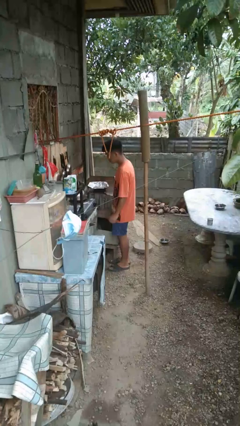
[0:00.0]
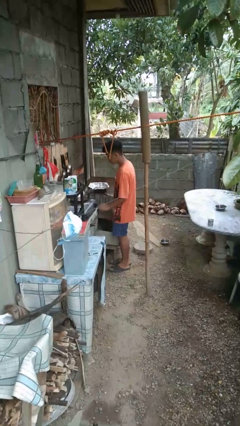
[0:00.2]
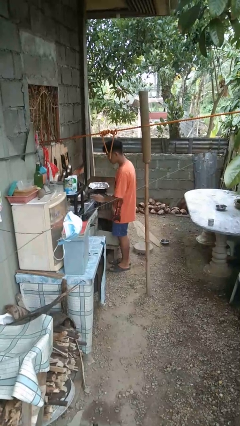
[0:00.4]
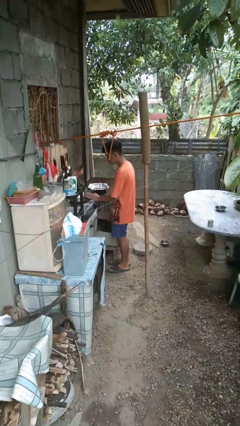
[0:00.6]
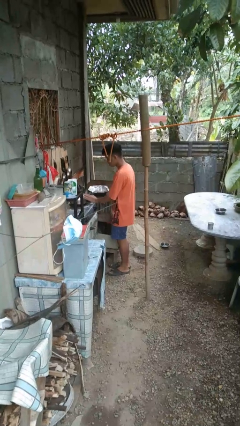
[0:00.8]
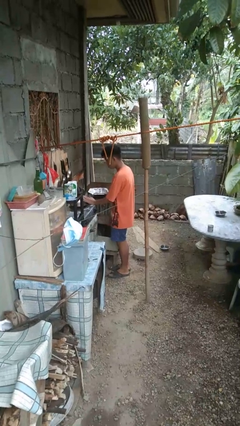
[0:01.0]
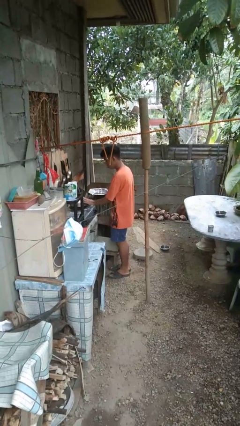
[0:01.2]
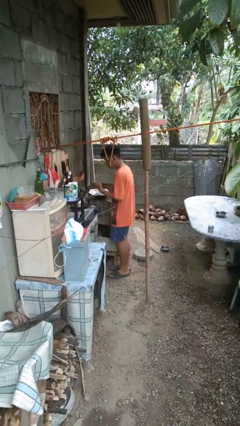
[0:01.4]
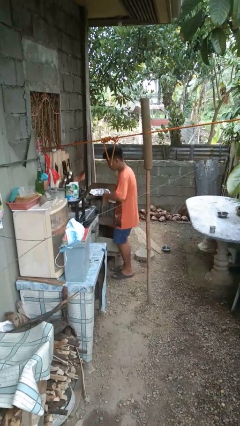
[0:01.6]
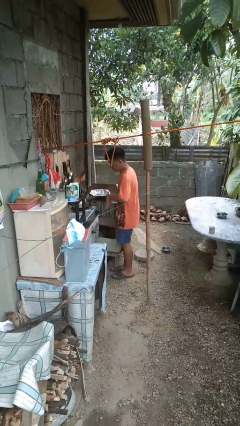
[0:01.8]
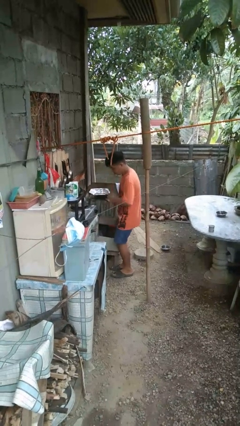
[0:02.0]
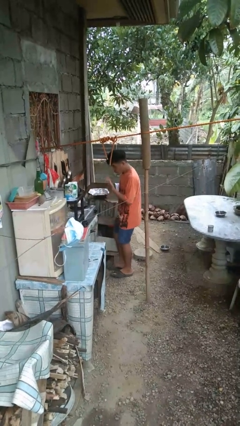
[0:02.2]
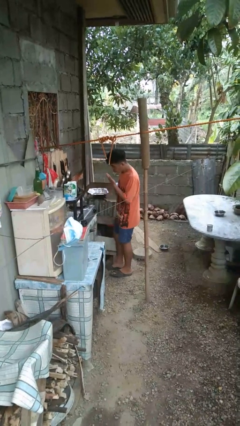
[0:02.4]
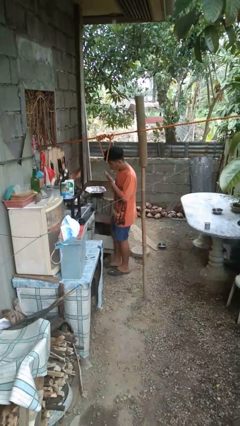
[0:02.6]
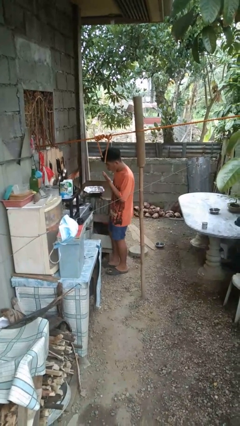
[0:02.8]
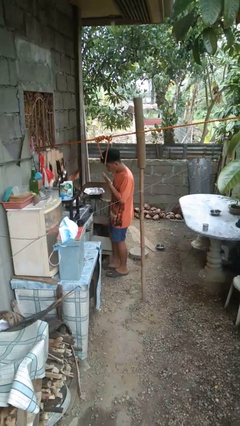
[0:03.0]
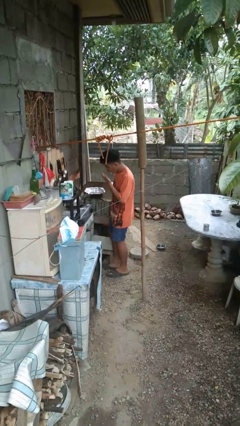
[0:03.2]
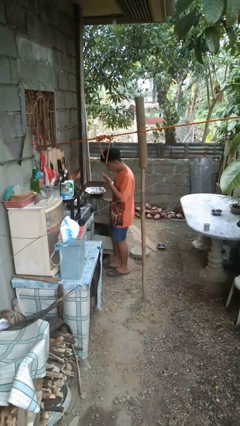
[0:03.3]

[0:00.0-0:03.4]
person burns hand

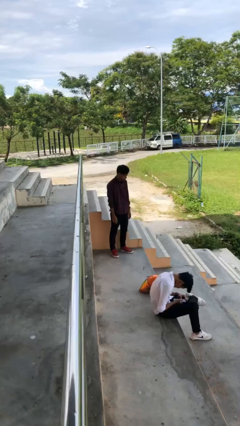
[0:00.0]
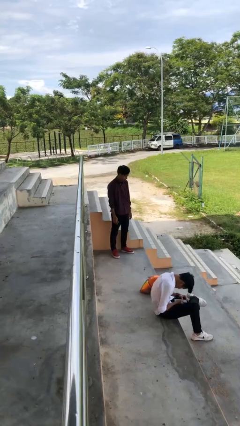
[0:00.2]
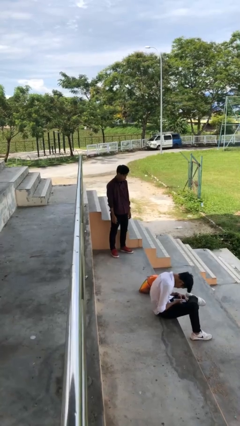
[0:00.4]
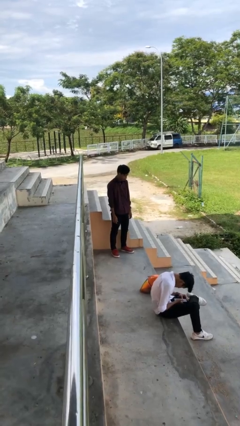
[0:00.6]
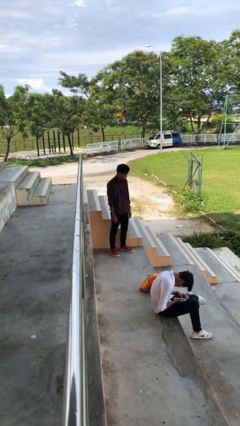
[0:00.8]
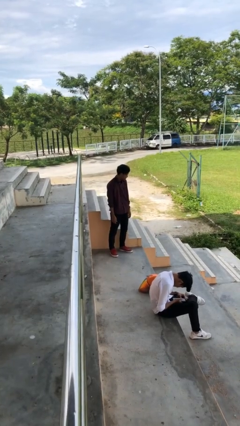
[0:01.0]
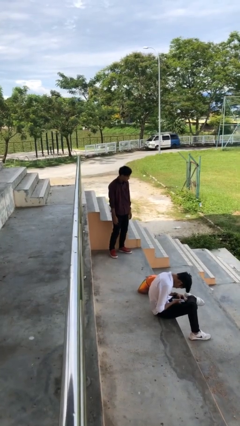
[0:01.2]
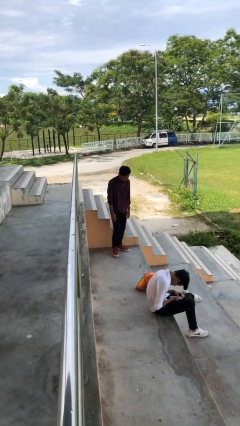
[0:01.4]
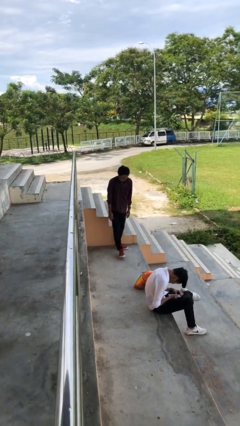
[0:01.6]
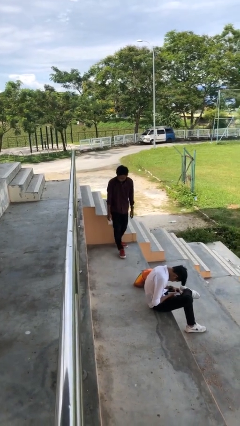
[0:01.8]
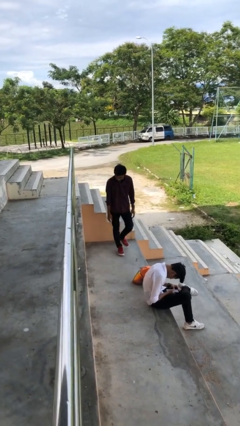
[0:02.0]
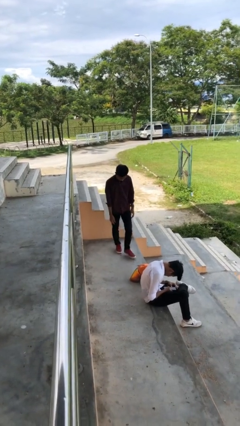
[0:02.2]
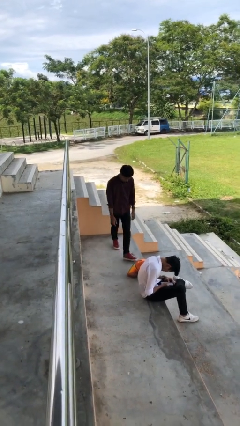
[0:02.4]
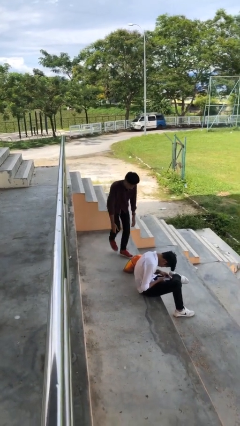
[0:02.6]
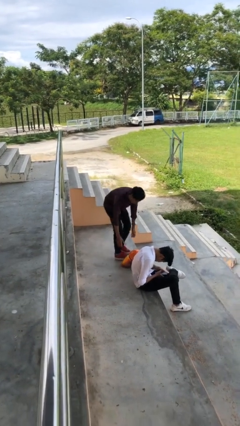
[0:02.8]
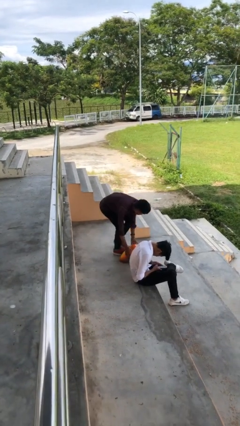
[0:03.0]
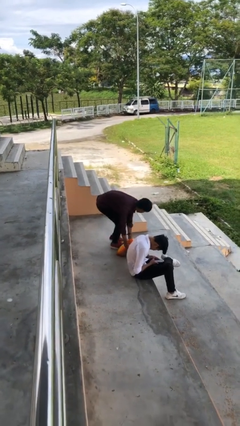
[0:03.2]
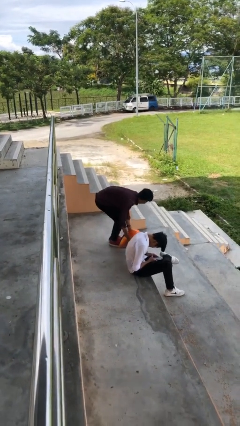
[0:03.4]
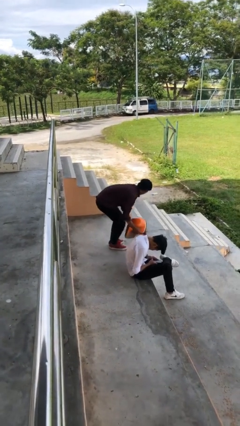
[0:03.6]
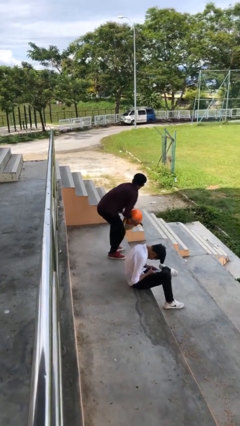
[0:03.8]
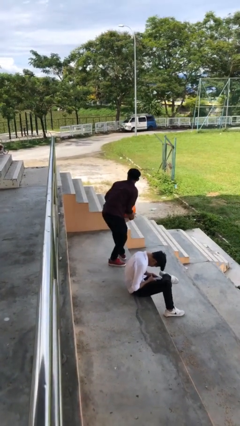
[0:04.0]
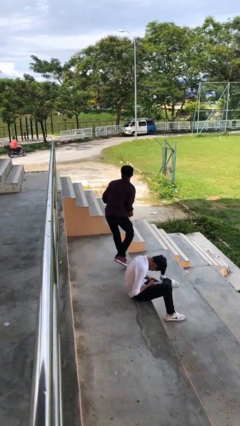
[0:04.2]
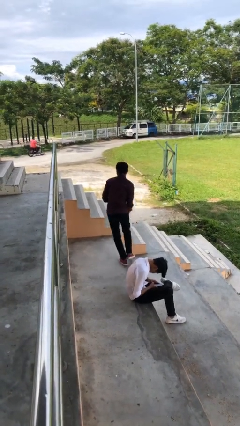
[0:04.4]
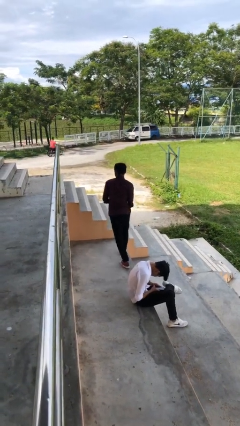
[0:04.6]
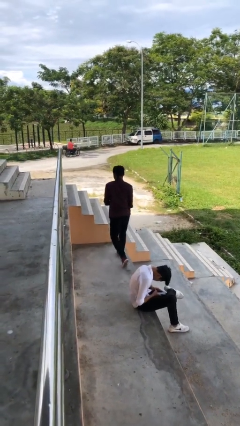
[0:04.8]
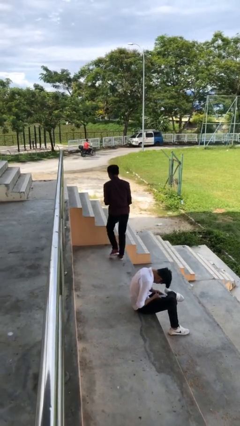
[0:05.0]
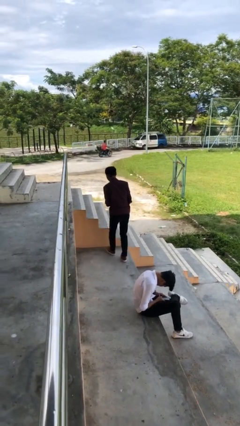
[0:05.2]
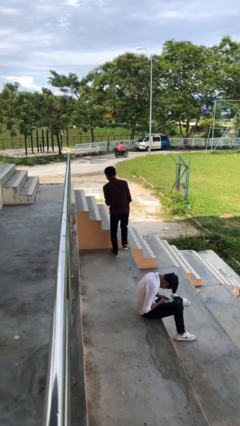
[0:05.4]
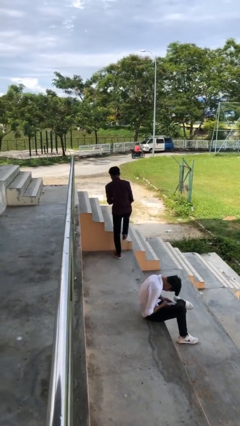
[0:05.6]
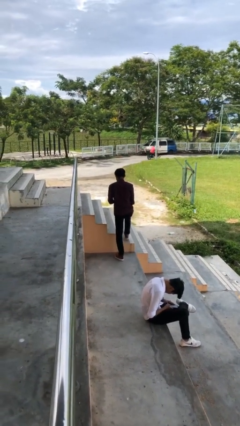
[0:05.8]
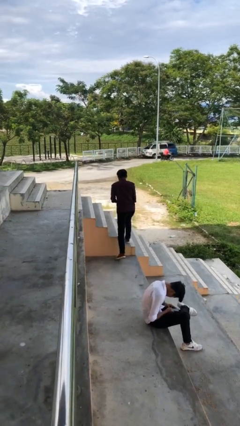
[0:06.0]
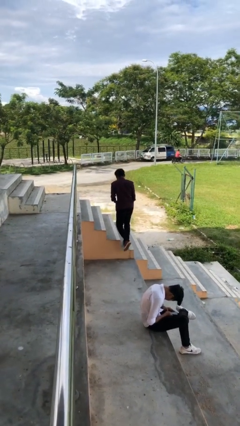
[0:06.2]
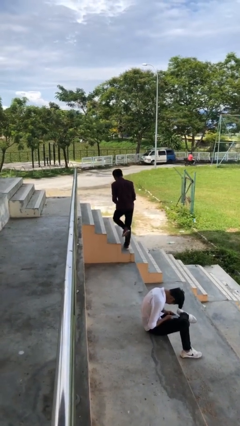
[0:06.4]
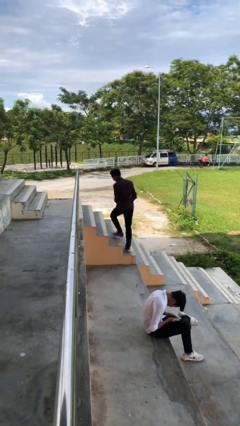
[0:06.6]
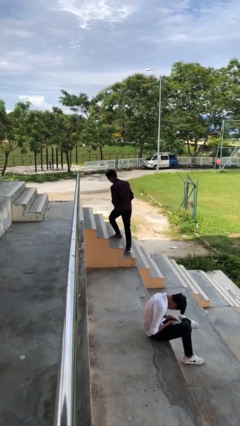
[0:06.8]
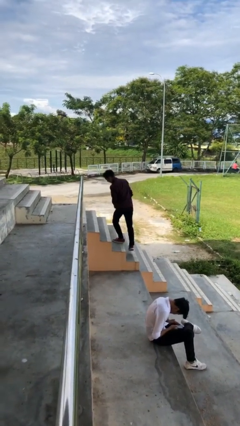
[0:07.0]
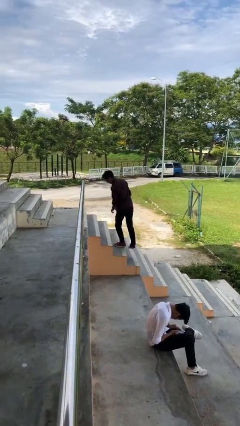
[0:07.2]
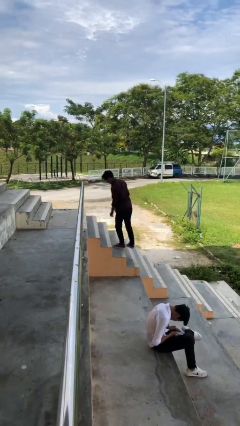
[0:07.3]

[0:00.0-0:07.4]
person steals object from person

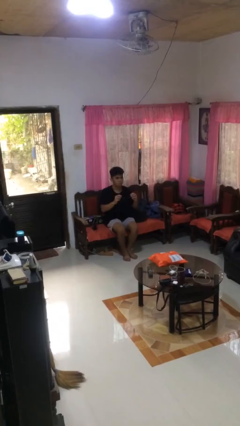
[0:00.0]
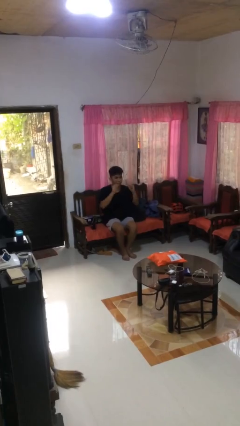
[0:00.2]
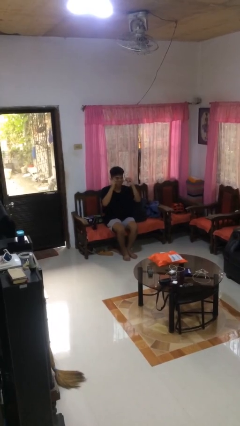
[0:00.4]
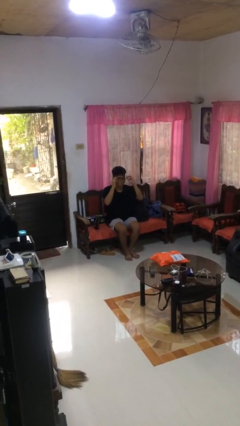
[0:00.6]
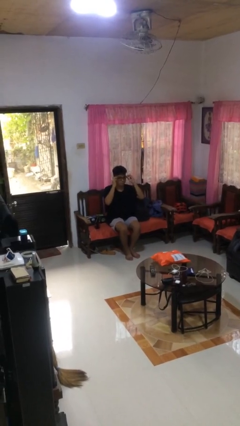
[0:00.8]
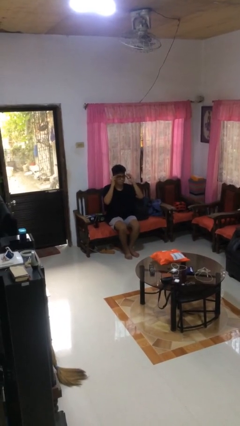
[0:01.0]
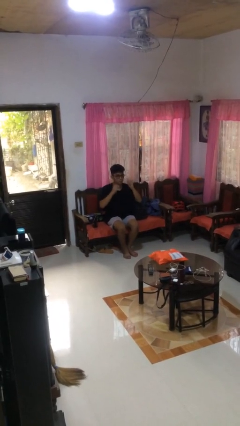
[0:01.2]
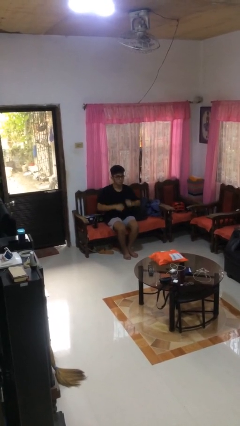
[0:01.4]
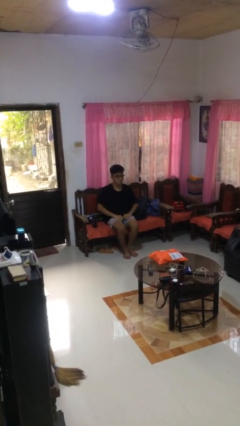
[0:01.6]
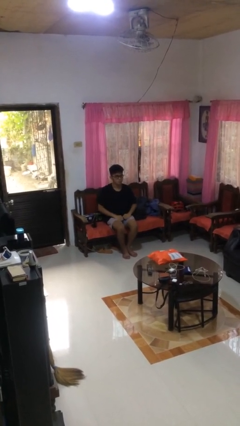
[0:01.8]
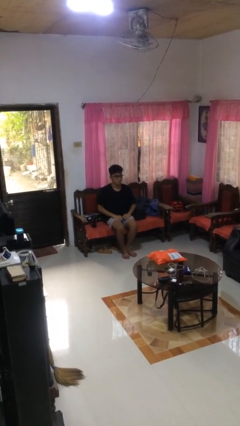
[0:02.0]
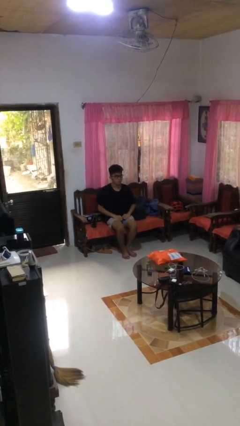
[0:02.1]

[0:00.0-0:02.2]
person puts on glasses

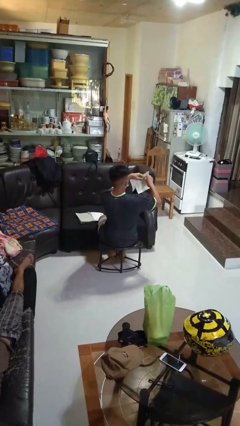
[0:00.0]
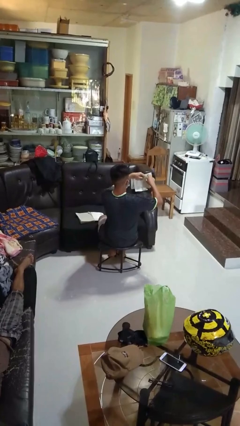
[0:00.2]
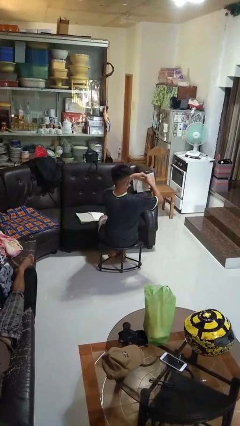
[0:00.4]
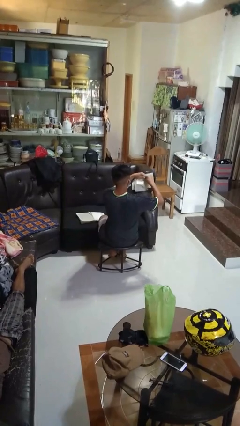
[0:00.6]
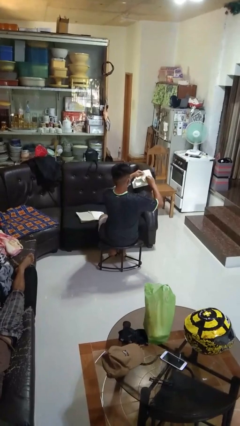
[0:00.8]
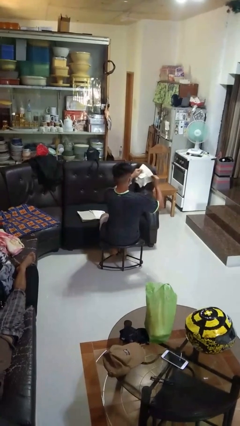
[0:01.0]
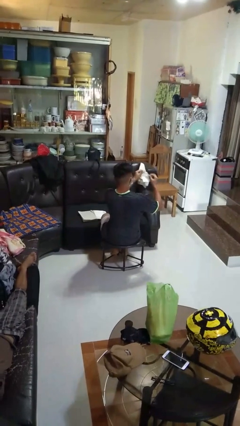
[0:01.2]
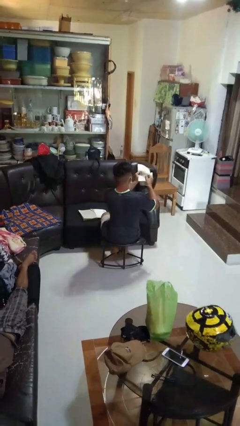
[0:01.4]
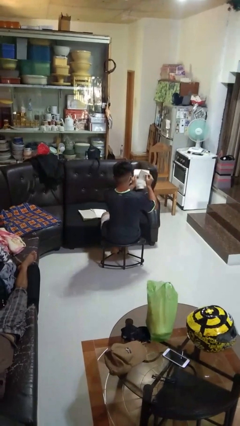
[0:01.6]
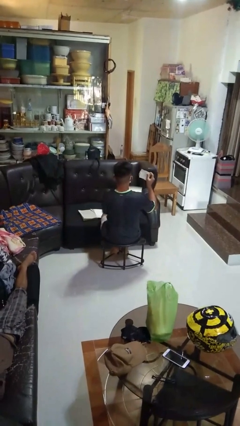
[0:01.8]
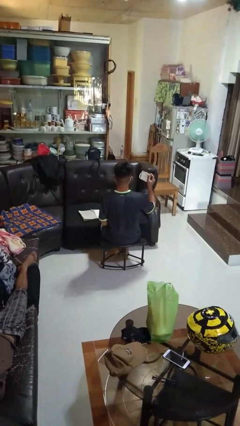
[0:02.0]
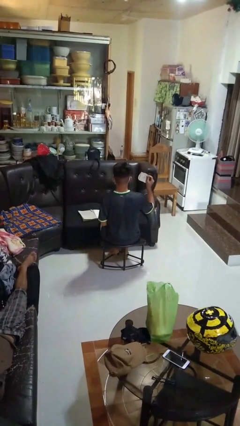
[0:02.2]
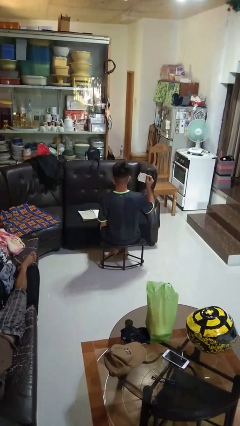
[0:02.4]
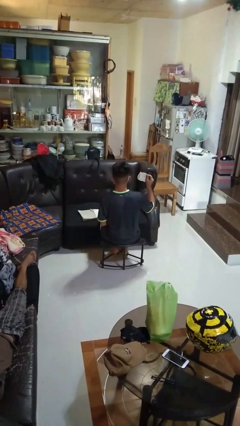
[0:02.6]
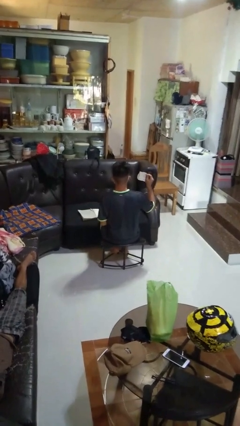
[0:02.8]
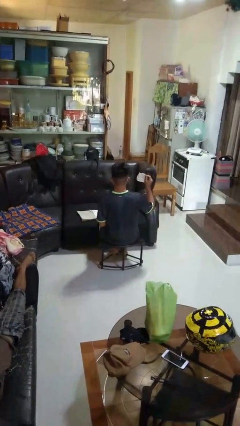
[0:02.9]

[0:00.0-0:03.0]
person tears paper

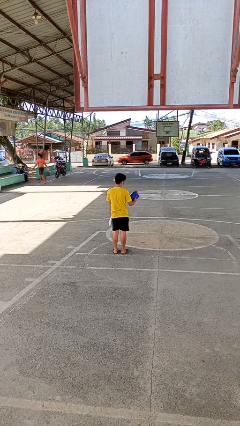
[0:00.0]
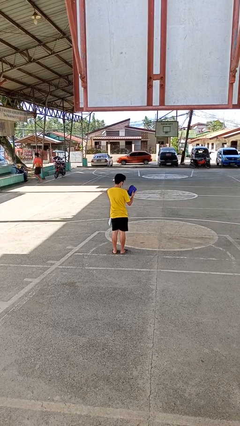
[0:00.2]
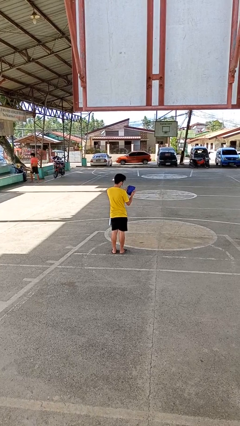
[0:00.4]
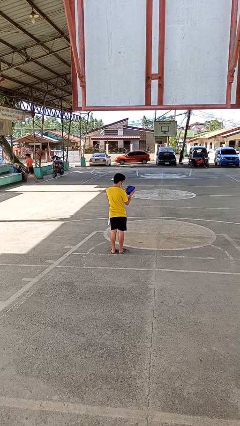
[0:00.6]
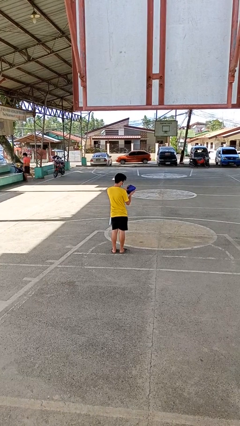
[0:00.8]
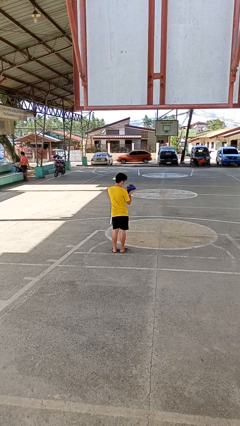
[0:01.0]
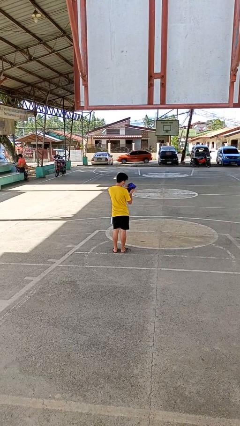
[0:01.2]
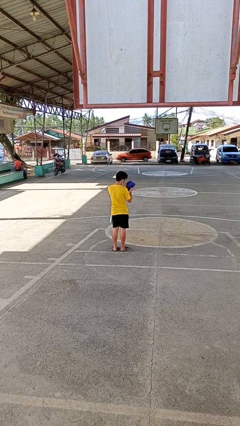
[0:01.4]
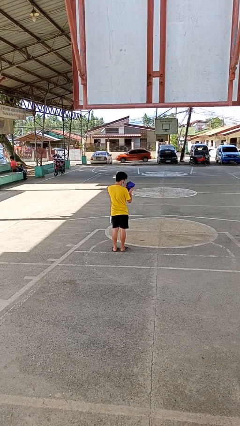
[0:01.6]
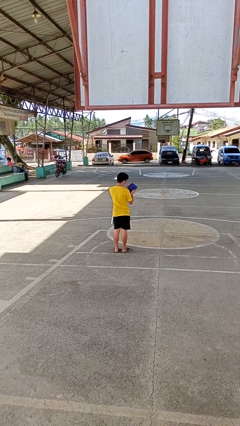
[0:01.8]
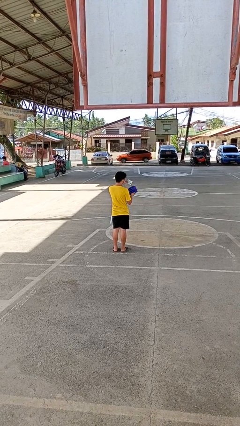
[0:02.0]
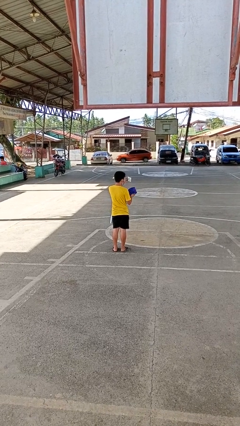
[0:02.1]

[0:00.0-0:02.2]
person searches in purse
